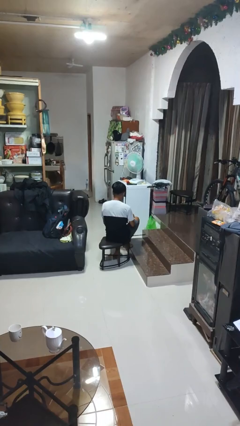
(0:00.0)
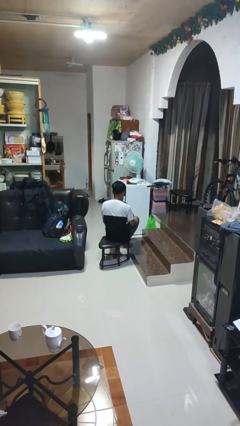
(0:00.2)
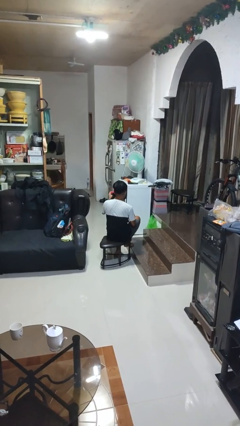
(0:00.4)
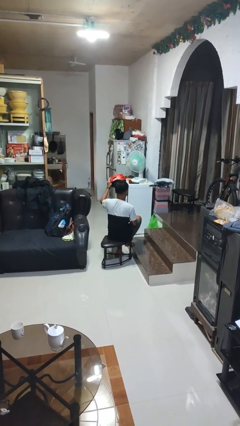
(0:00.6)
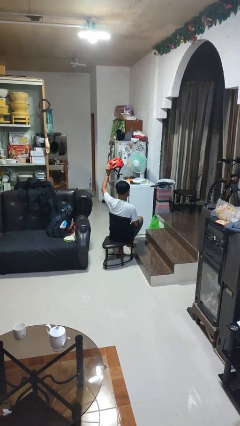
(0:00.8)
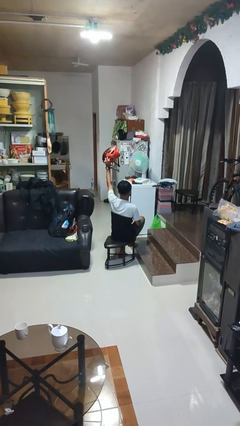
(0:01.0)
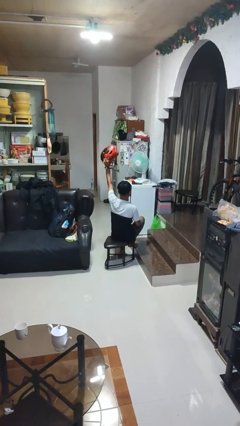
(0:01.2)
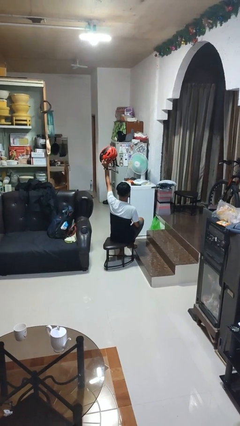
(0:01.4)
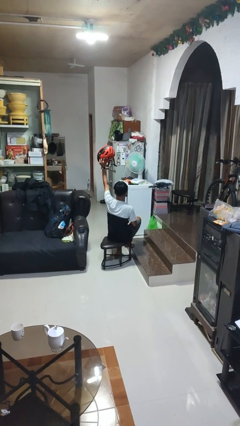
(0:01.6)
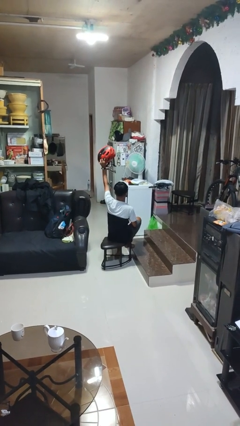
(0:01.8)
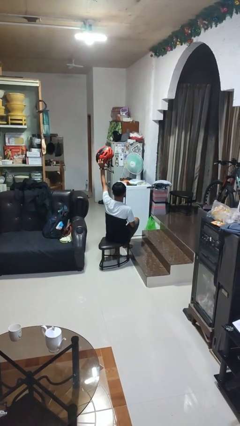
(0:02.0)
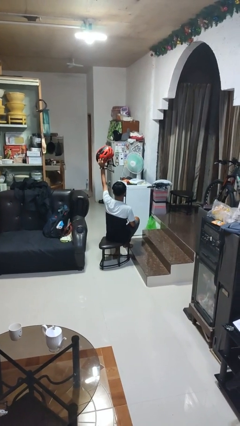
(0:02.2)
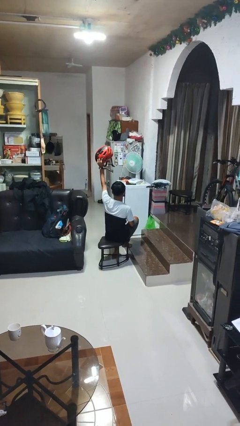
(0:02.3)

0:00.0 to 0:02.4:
person holds object above head

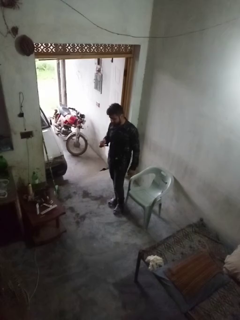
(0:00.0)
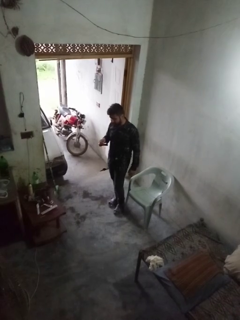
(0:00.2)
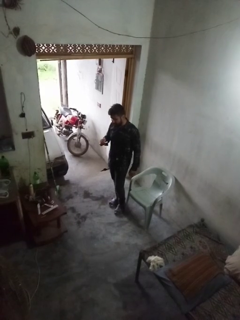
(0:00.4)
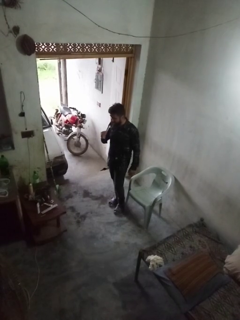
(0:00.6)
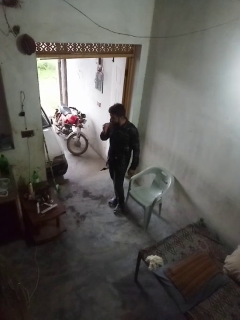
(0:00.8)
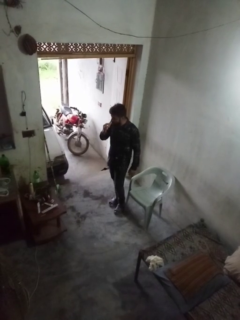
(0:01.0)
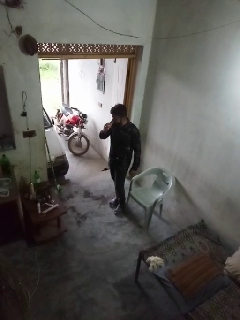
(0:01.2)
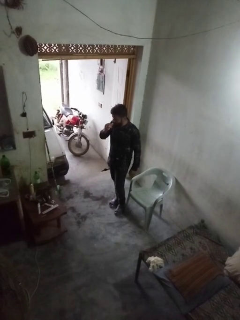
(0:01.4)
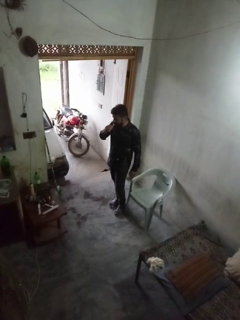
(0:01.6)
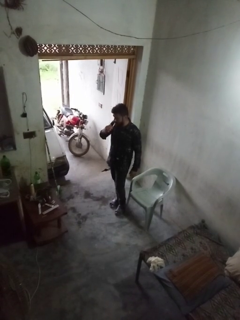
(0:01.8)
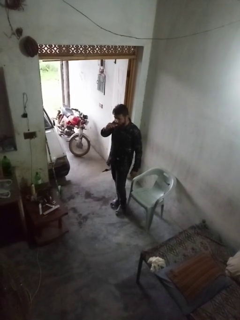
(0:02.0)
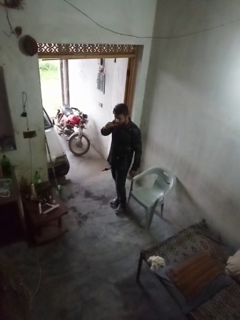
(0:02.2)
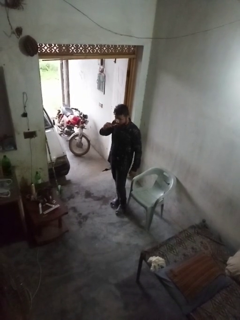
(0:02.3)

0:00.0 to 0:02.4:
person brushes teeth

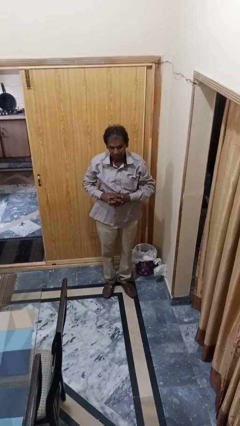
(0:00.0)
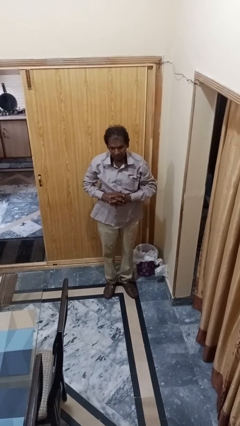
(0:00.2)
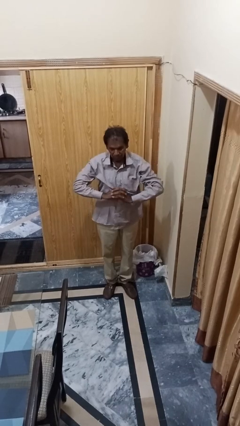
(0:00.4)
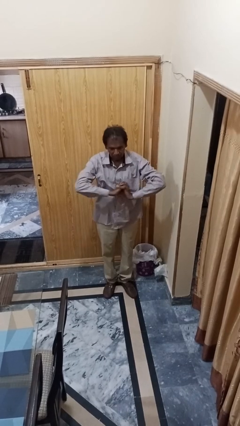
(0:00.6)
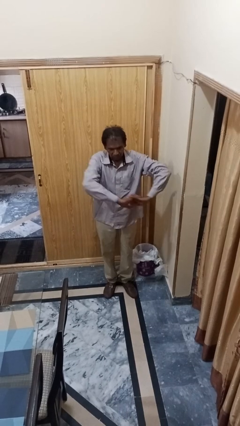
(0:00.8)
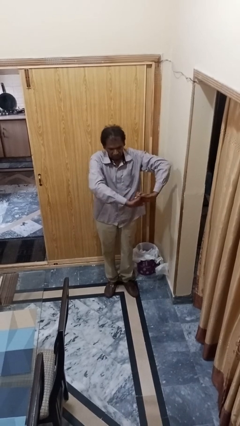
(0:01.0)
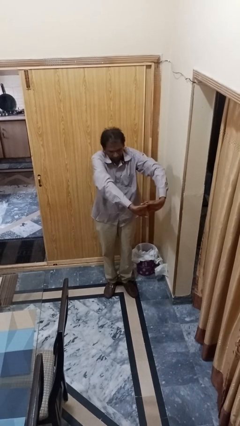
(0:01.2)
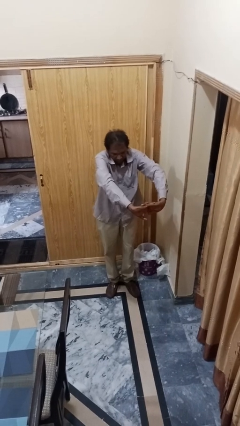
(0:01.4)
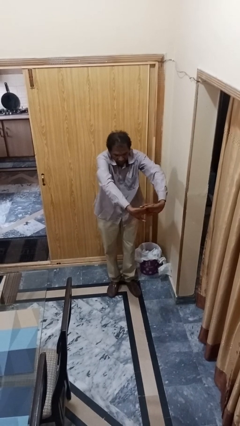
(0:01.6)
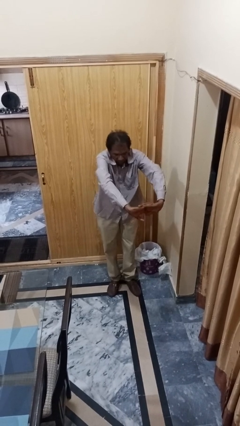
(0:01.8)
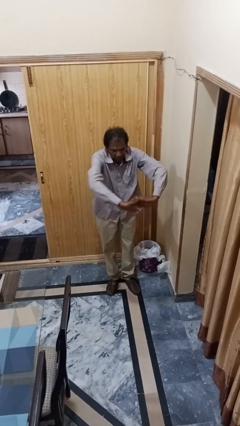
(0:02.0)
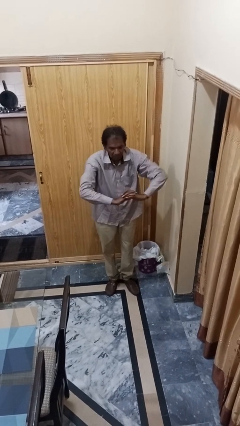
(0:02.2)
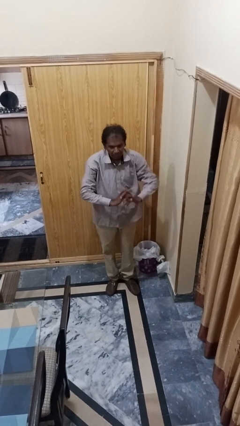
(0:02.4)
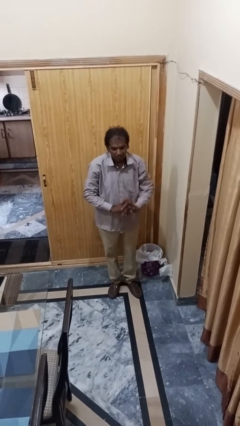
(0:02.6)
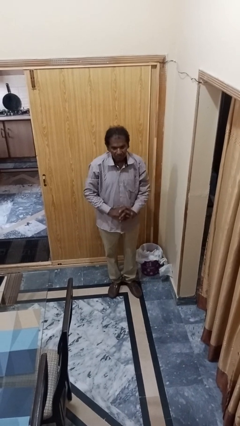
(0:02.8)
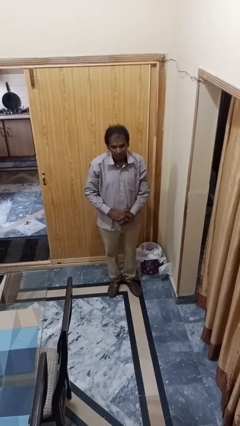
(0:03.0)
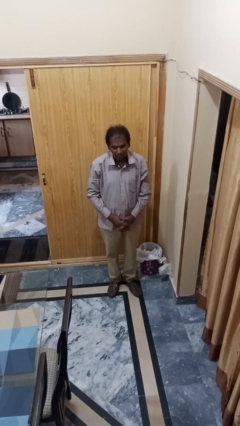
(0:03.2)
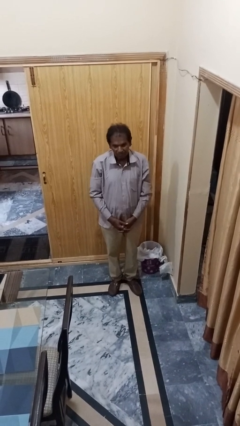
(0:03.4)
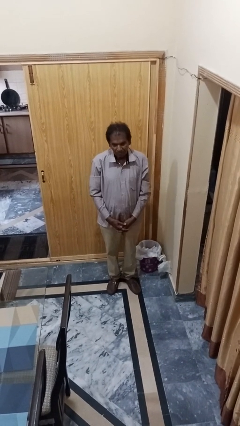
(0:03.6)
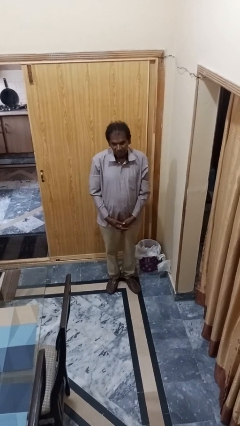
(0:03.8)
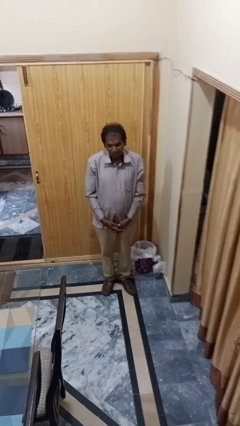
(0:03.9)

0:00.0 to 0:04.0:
person cracks knuckles

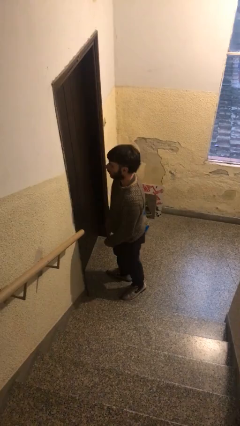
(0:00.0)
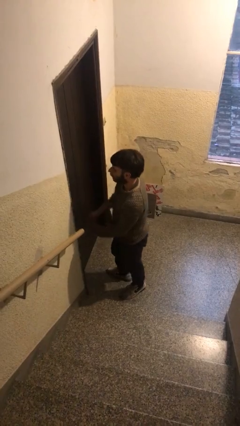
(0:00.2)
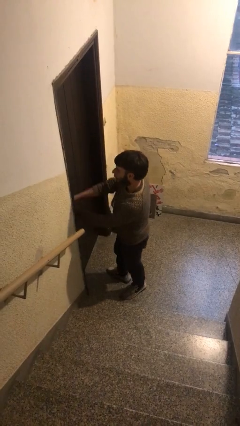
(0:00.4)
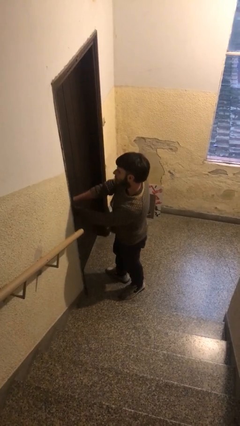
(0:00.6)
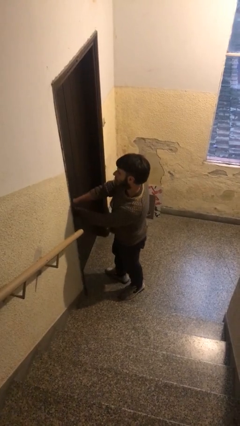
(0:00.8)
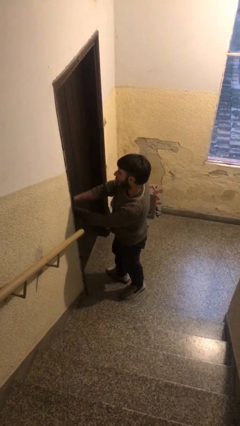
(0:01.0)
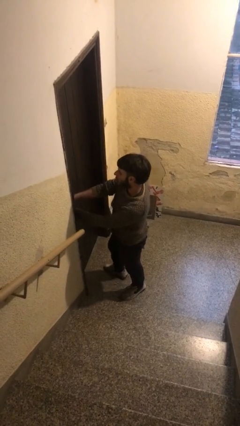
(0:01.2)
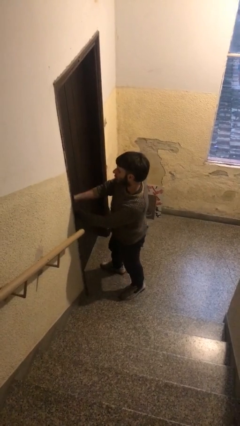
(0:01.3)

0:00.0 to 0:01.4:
person unlocks door with keys

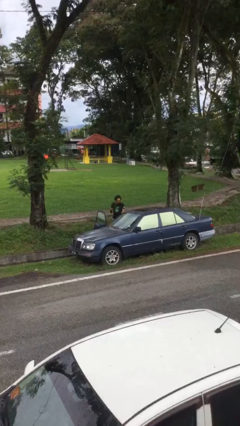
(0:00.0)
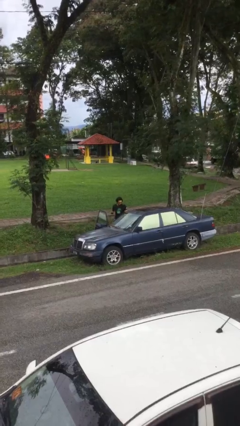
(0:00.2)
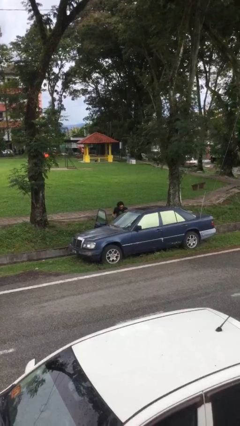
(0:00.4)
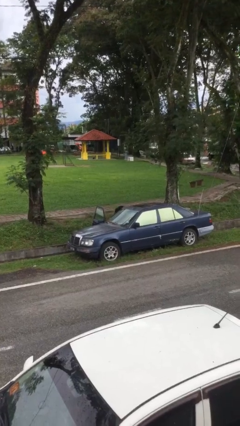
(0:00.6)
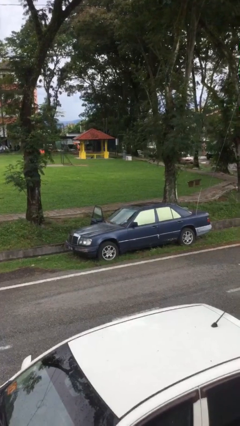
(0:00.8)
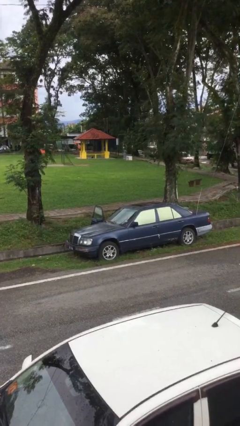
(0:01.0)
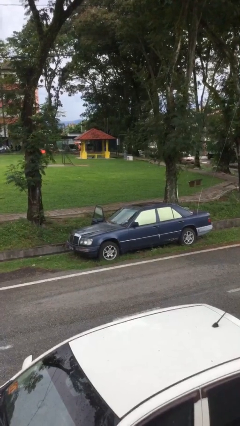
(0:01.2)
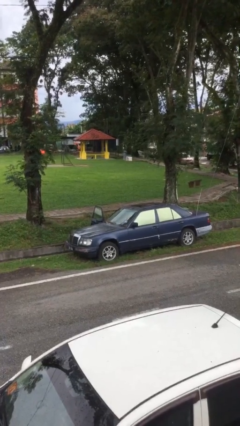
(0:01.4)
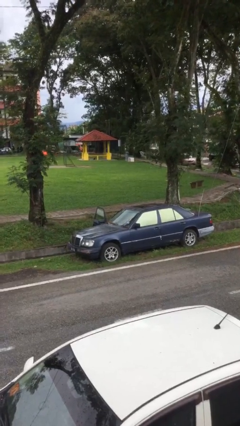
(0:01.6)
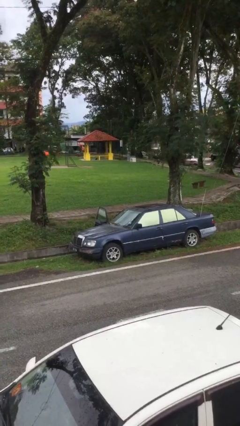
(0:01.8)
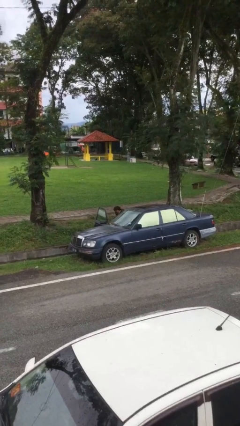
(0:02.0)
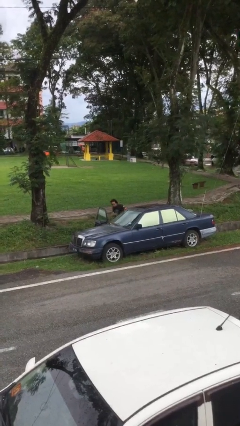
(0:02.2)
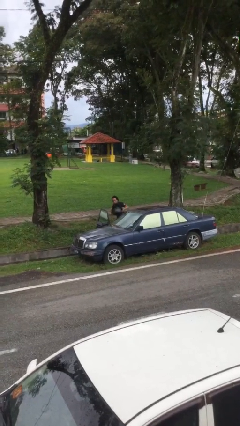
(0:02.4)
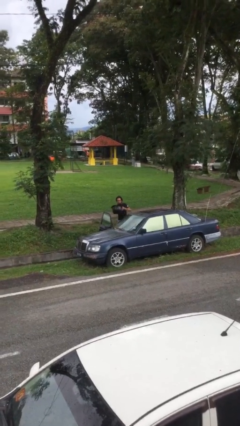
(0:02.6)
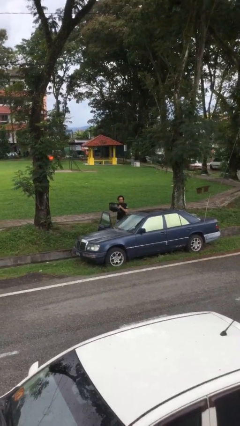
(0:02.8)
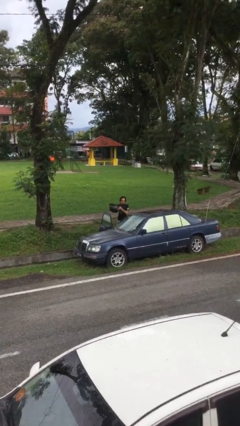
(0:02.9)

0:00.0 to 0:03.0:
person unloads car

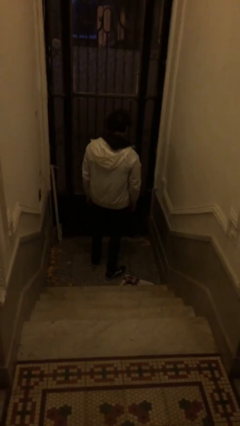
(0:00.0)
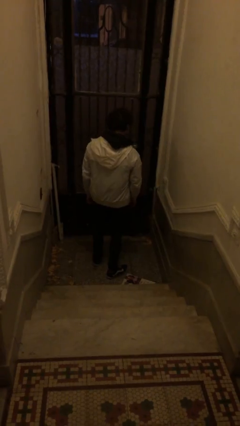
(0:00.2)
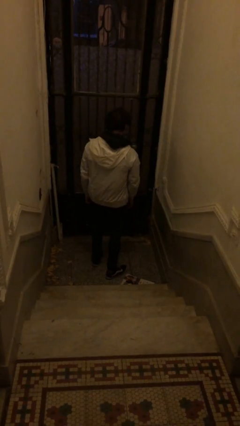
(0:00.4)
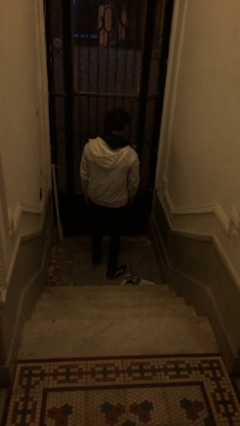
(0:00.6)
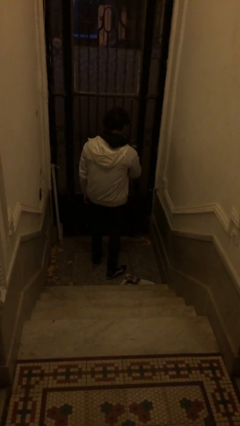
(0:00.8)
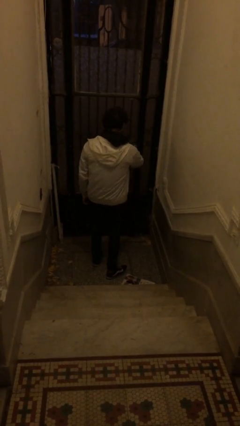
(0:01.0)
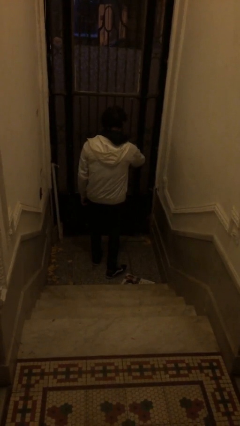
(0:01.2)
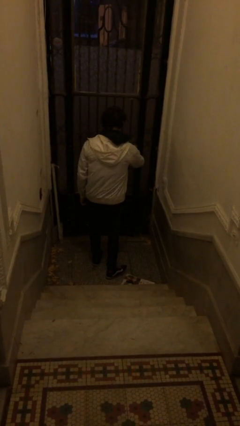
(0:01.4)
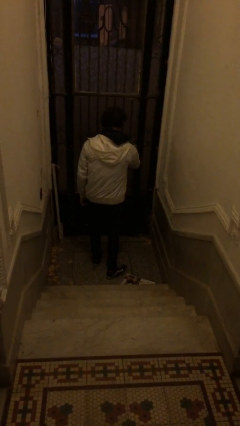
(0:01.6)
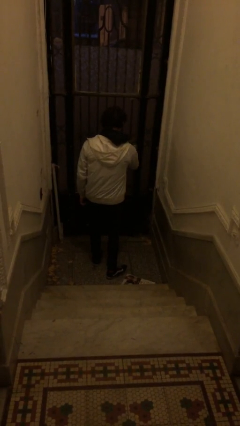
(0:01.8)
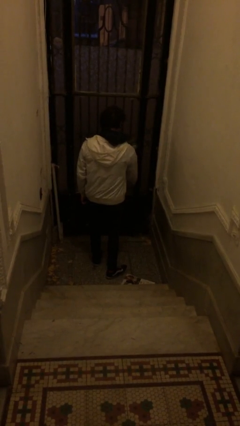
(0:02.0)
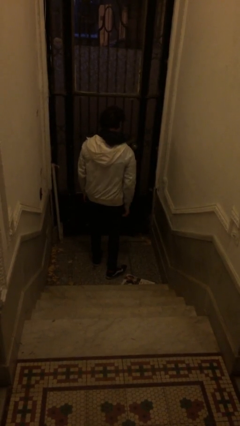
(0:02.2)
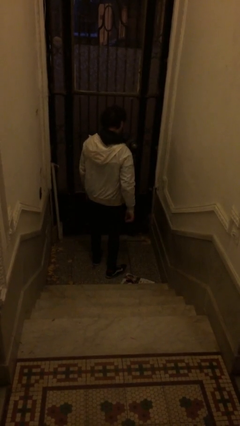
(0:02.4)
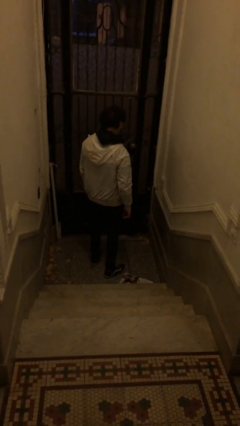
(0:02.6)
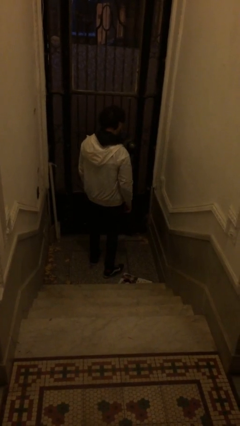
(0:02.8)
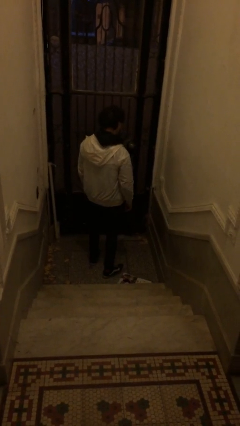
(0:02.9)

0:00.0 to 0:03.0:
person locks door with keys

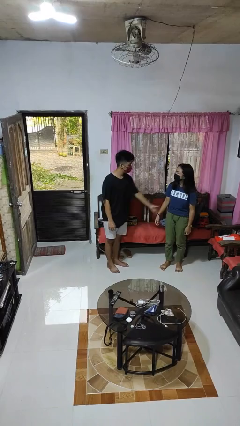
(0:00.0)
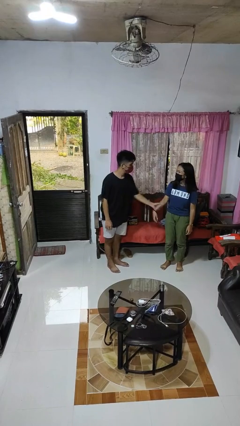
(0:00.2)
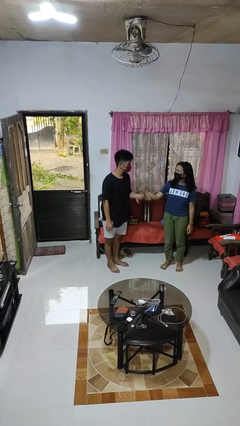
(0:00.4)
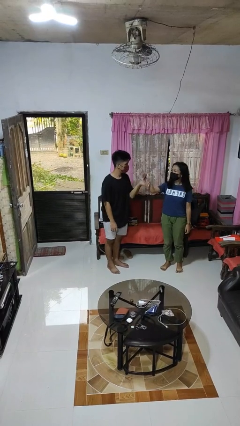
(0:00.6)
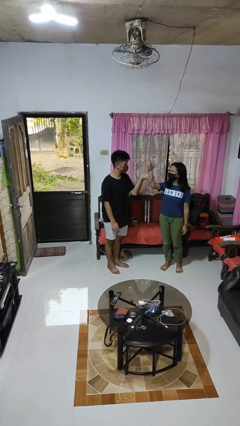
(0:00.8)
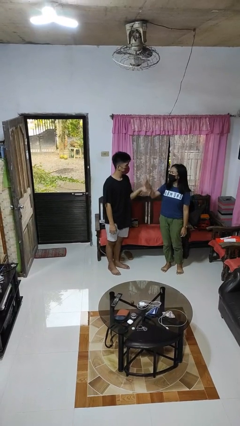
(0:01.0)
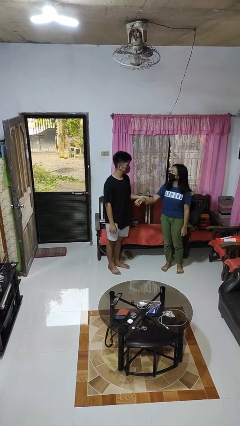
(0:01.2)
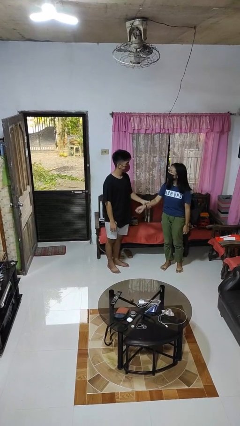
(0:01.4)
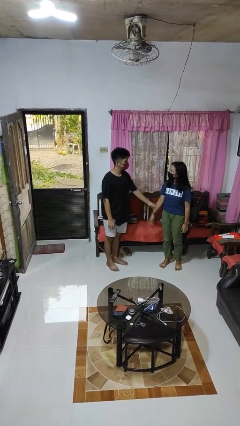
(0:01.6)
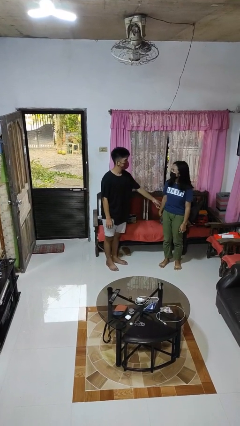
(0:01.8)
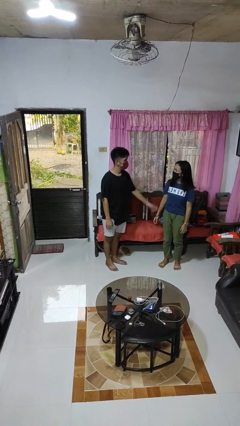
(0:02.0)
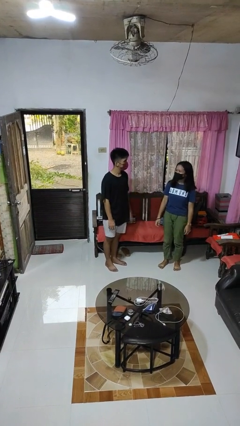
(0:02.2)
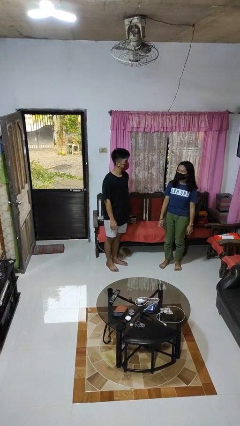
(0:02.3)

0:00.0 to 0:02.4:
person grabs person by forearm
